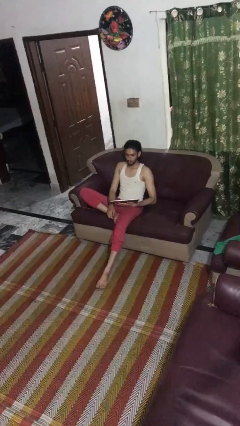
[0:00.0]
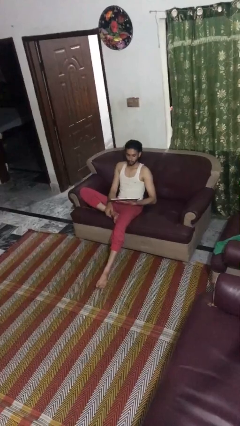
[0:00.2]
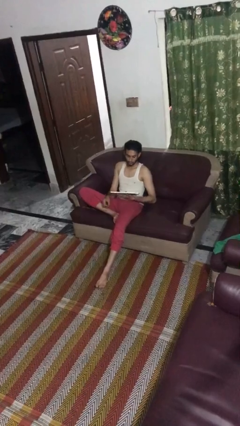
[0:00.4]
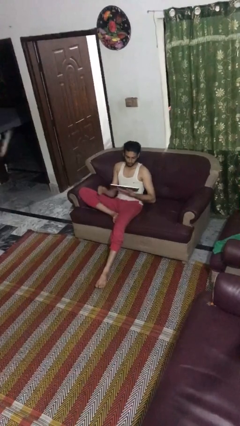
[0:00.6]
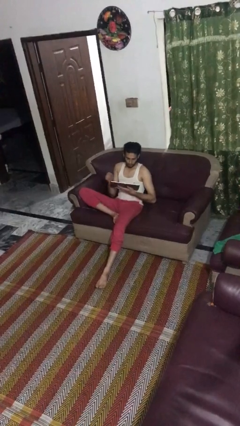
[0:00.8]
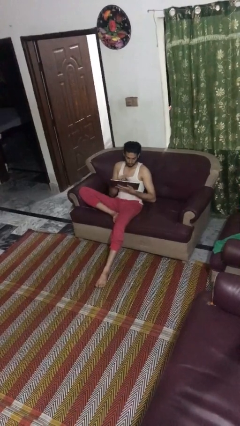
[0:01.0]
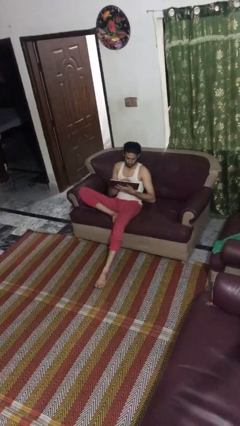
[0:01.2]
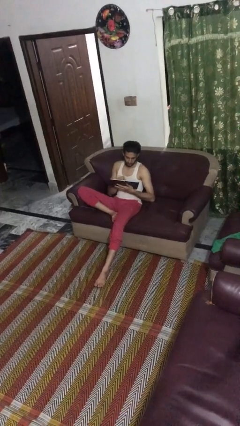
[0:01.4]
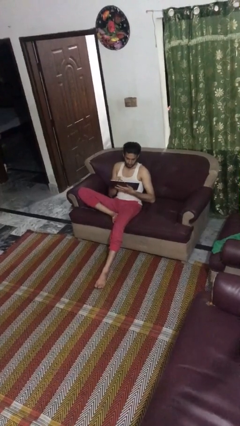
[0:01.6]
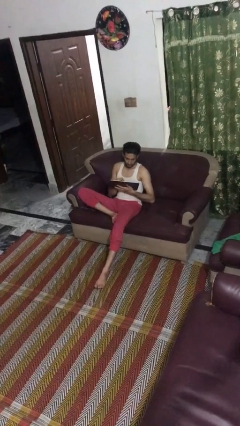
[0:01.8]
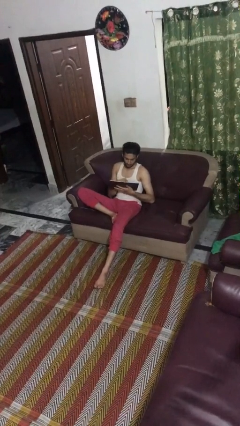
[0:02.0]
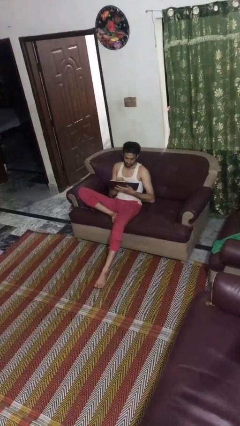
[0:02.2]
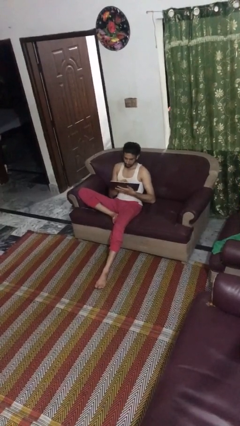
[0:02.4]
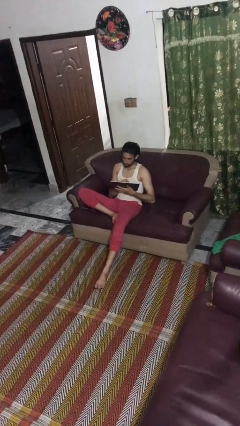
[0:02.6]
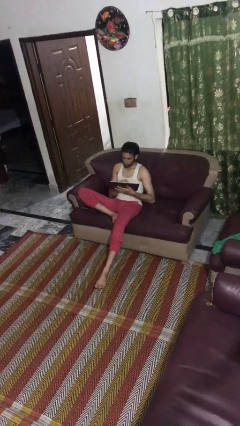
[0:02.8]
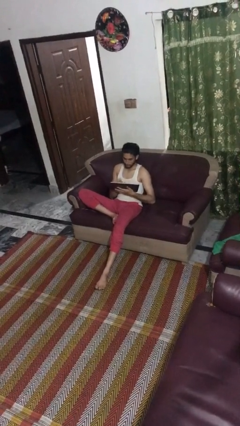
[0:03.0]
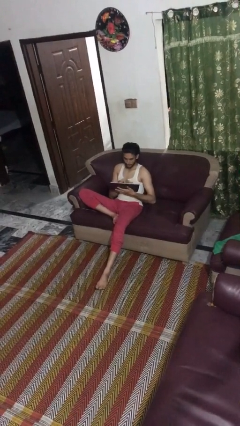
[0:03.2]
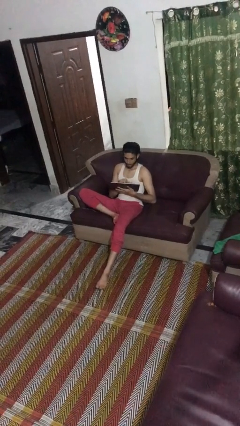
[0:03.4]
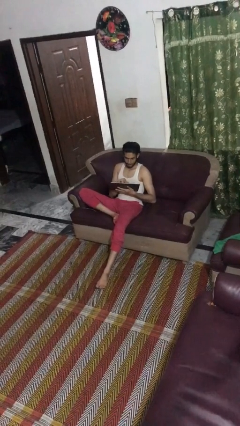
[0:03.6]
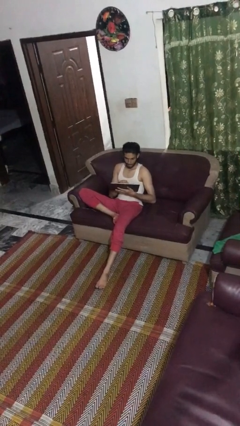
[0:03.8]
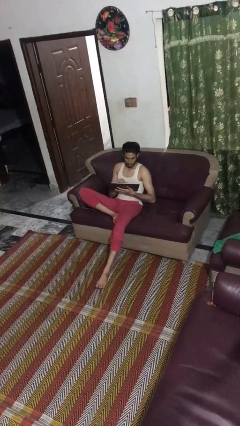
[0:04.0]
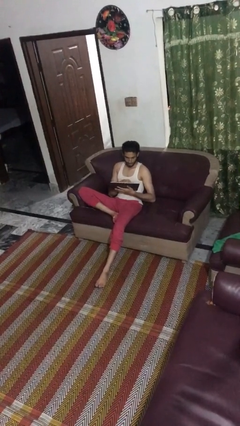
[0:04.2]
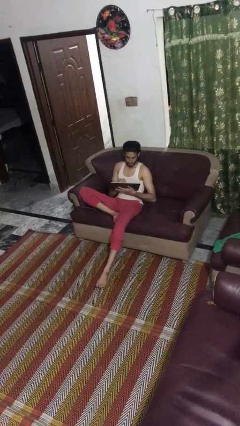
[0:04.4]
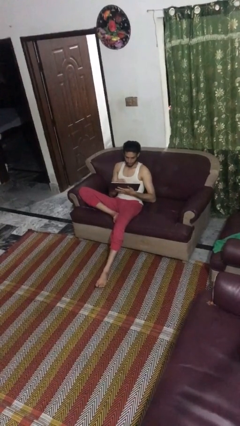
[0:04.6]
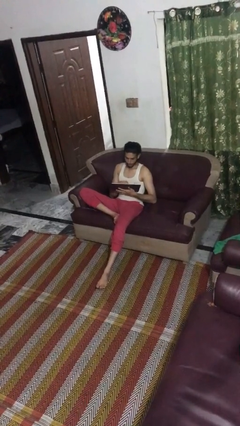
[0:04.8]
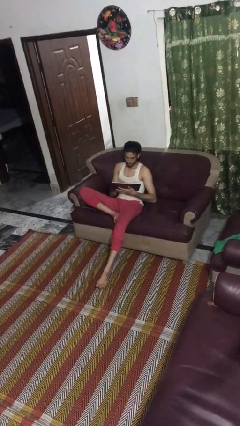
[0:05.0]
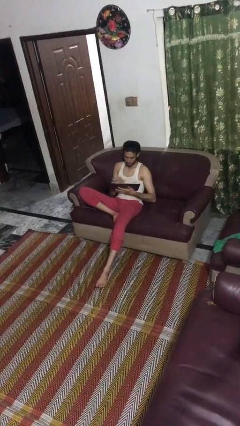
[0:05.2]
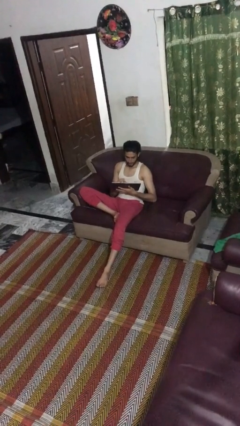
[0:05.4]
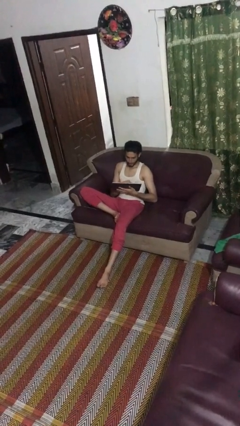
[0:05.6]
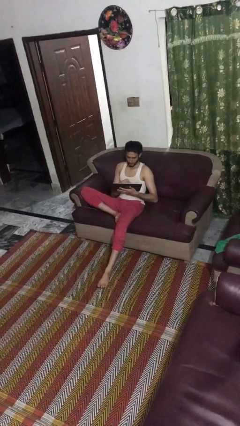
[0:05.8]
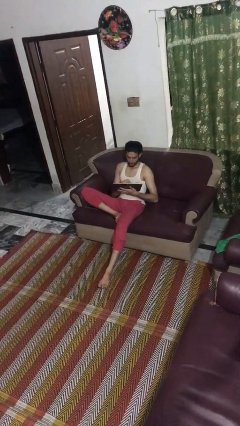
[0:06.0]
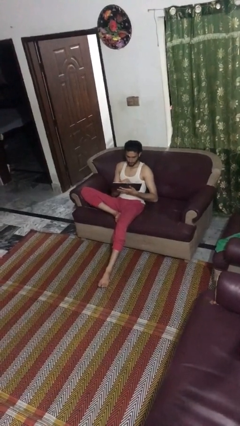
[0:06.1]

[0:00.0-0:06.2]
person interacts with tablet

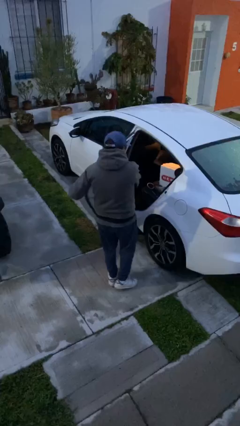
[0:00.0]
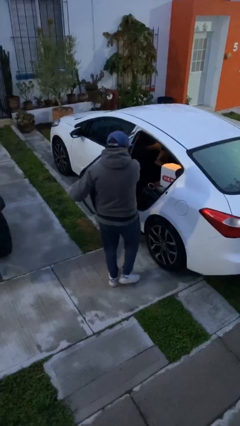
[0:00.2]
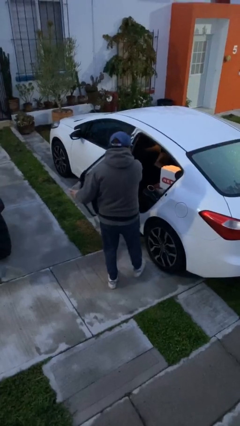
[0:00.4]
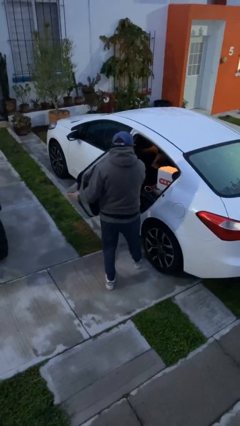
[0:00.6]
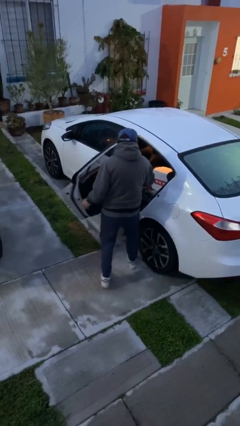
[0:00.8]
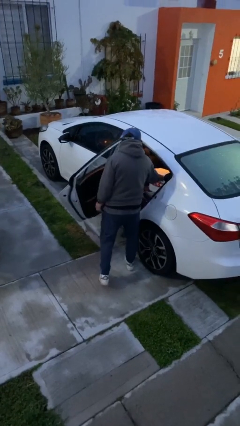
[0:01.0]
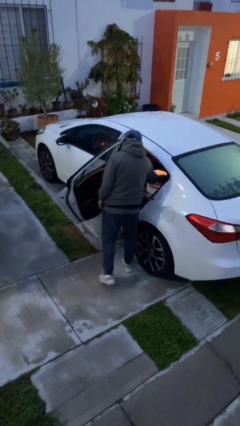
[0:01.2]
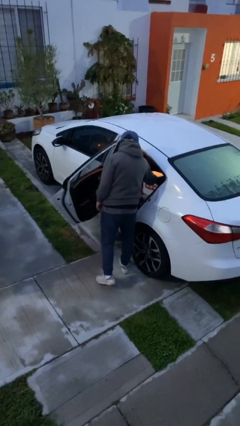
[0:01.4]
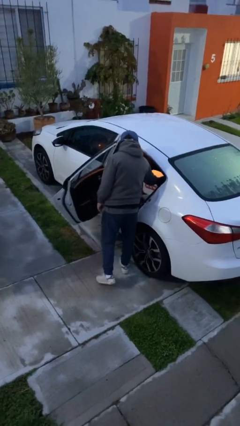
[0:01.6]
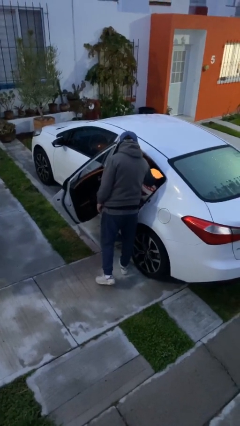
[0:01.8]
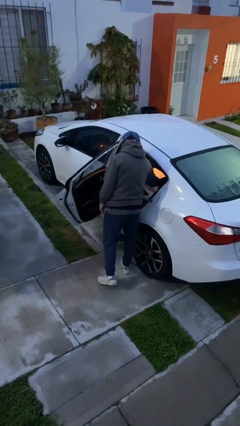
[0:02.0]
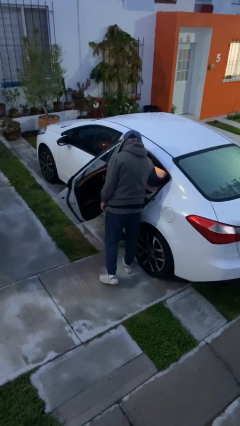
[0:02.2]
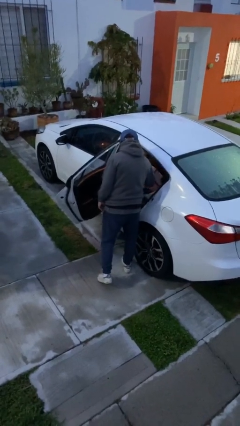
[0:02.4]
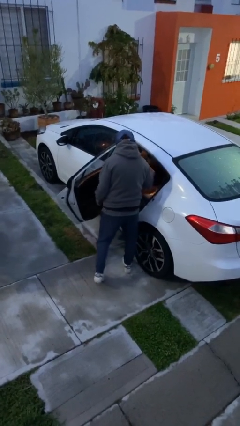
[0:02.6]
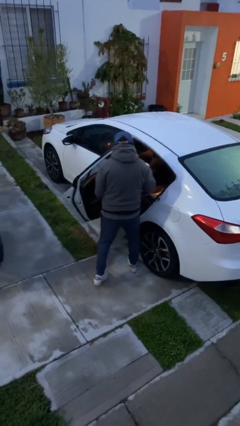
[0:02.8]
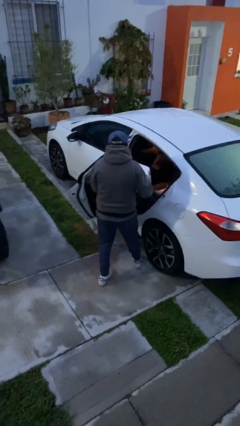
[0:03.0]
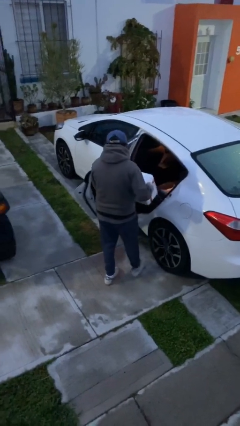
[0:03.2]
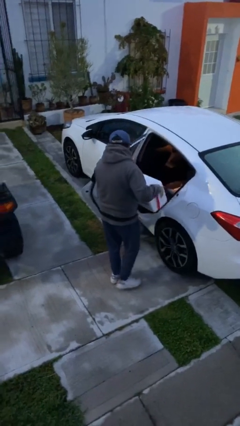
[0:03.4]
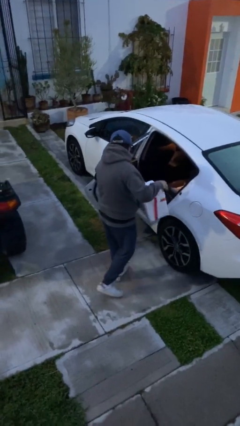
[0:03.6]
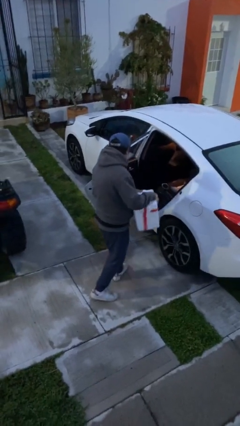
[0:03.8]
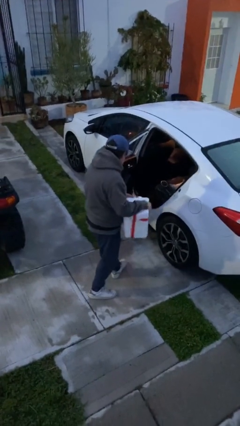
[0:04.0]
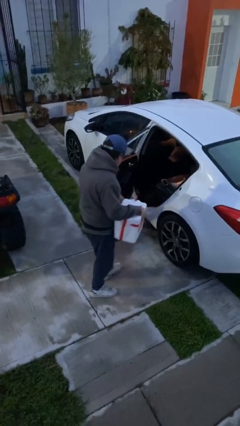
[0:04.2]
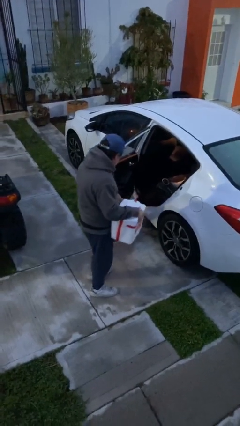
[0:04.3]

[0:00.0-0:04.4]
person unloads car

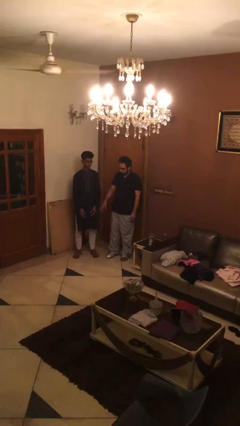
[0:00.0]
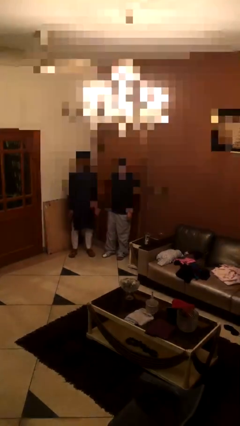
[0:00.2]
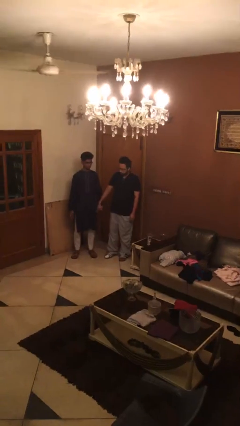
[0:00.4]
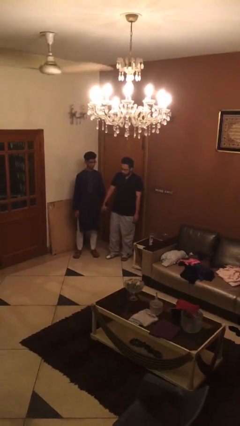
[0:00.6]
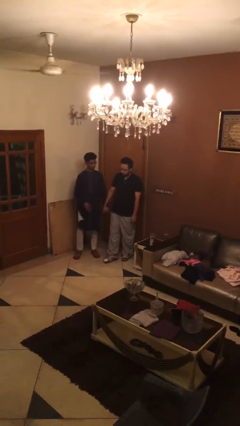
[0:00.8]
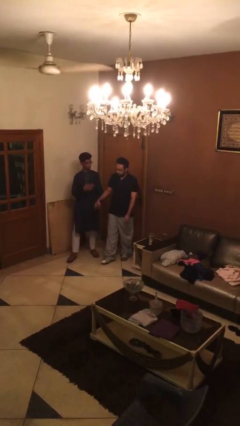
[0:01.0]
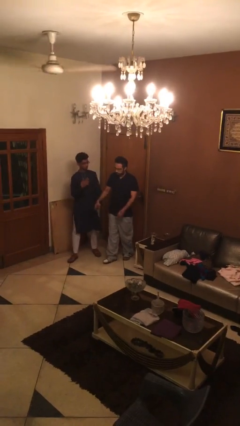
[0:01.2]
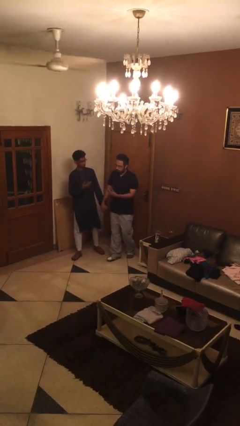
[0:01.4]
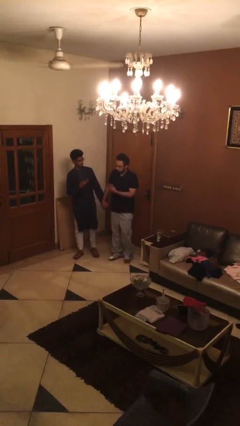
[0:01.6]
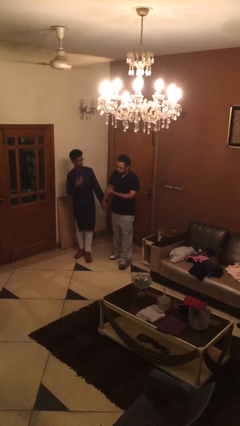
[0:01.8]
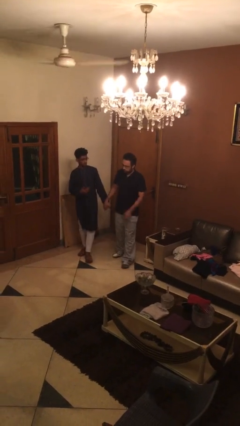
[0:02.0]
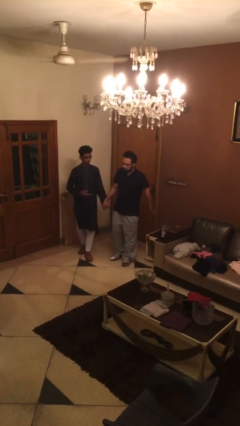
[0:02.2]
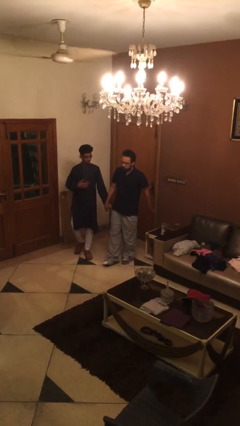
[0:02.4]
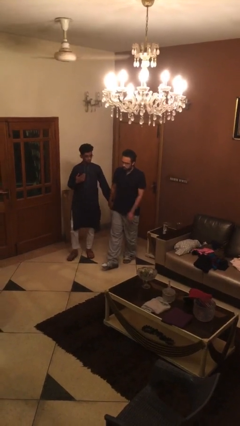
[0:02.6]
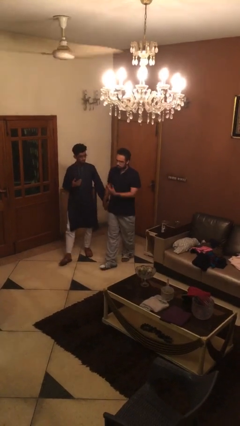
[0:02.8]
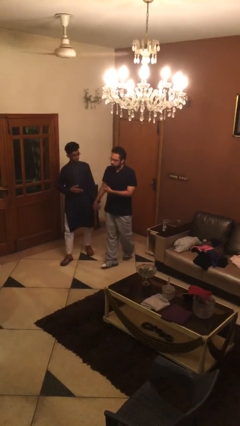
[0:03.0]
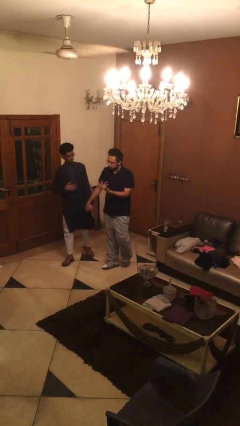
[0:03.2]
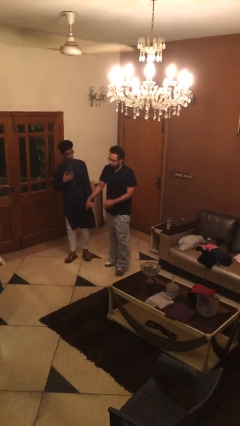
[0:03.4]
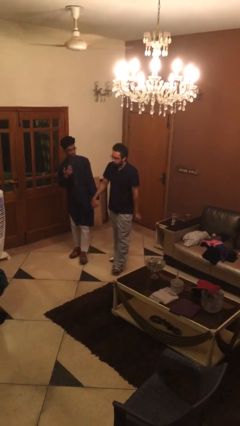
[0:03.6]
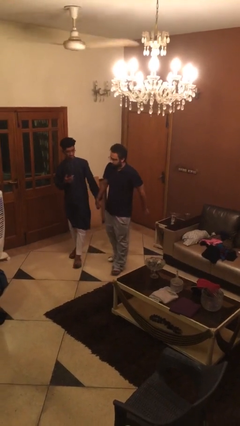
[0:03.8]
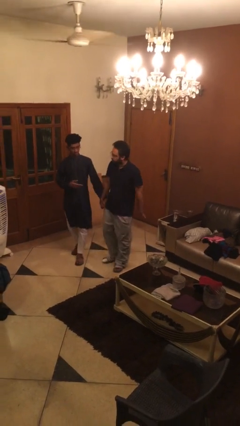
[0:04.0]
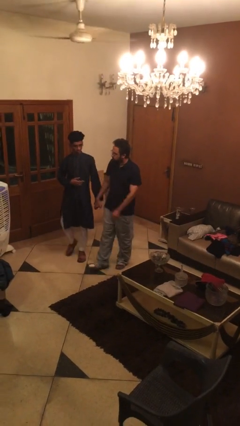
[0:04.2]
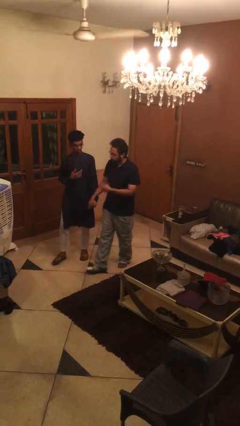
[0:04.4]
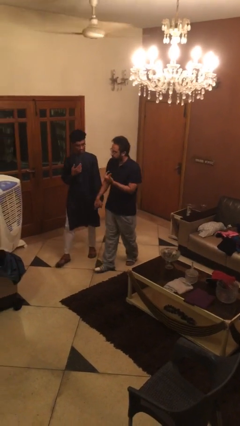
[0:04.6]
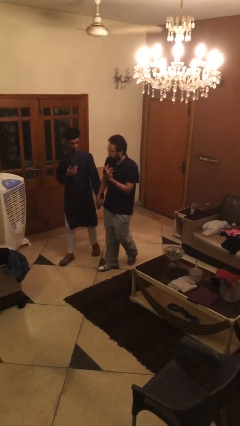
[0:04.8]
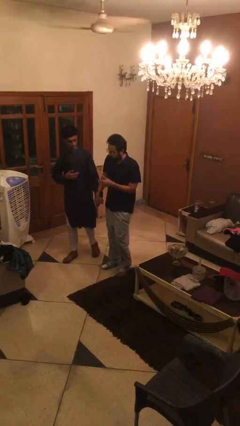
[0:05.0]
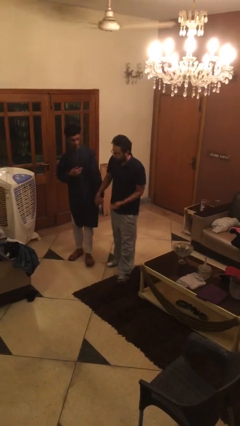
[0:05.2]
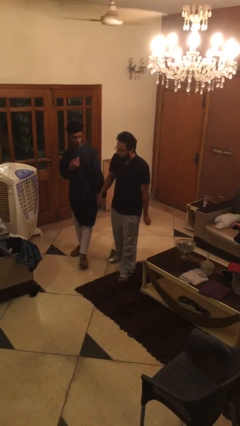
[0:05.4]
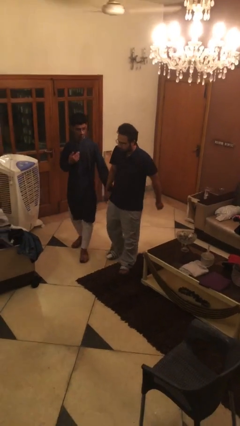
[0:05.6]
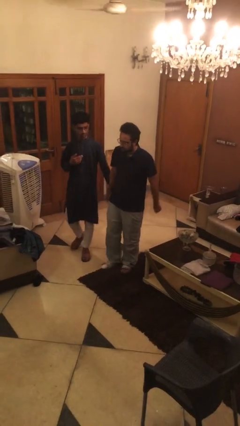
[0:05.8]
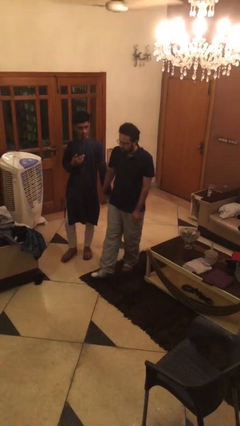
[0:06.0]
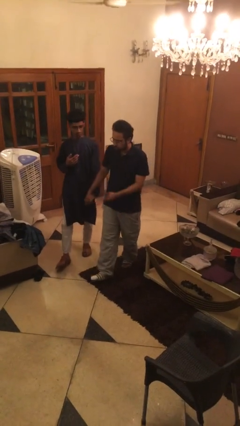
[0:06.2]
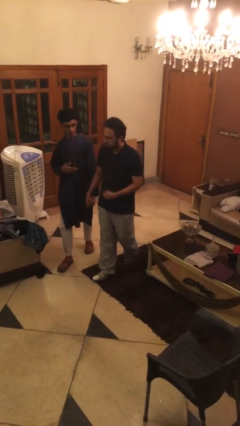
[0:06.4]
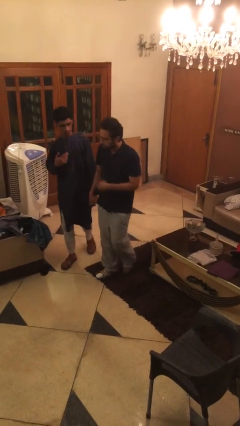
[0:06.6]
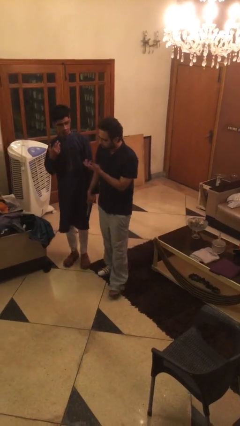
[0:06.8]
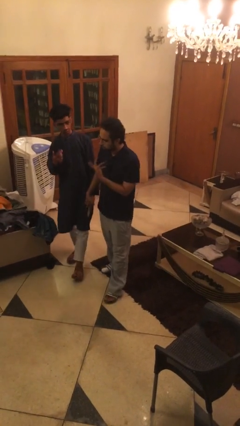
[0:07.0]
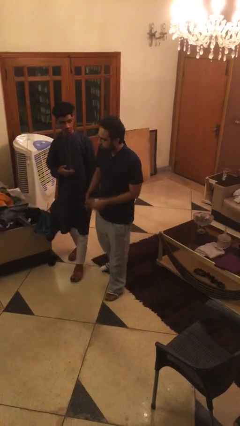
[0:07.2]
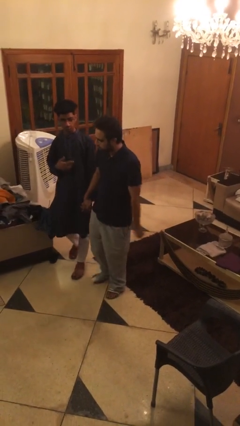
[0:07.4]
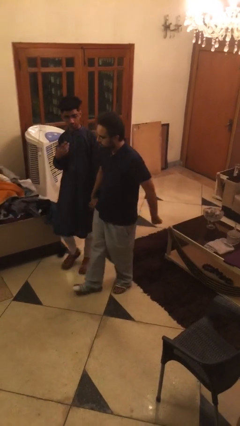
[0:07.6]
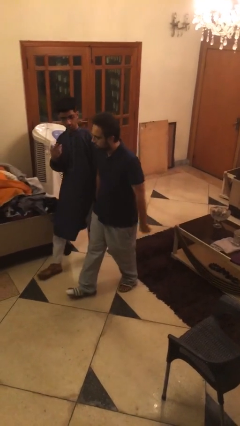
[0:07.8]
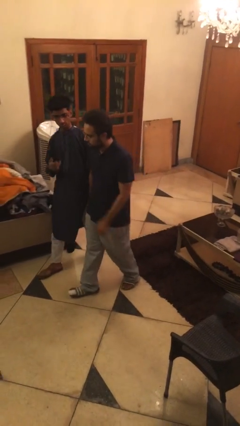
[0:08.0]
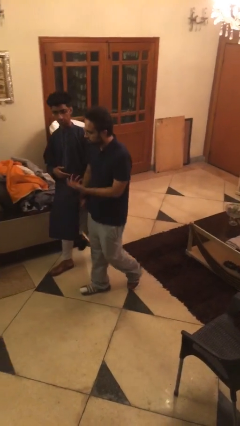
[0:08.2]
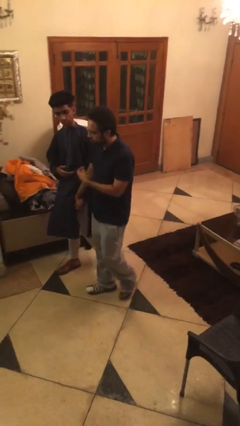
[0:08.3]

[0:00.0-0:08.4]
person holds hand
